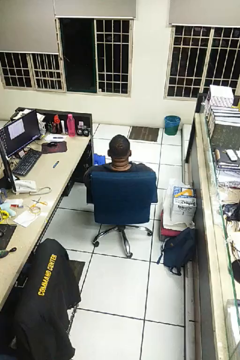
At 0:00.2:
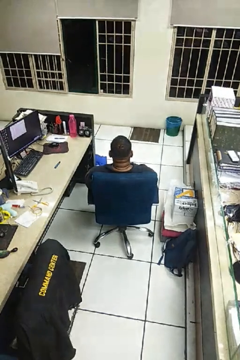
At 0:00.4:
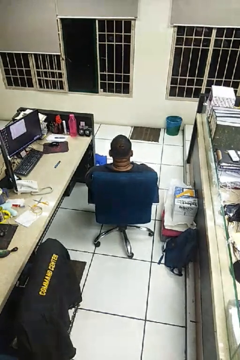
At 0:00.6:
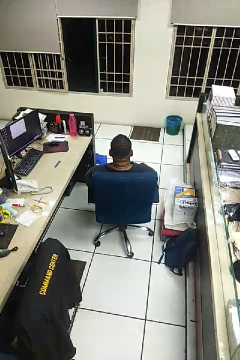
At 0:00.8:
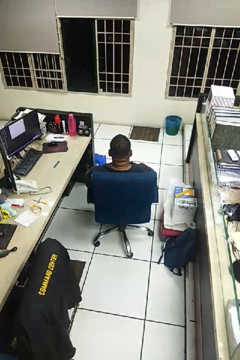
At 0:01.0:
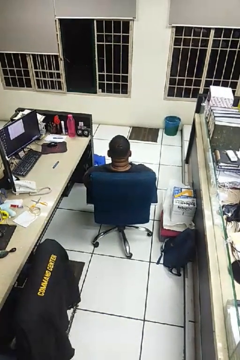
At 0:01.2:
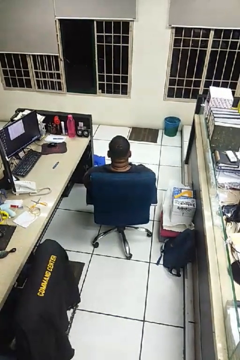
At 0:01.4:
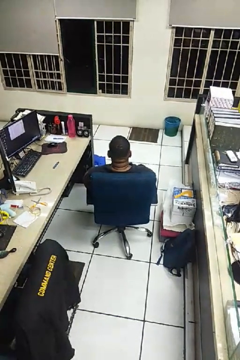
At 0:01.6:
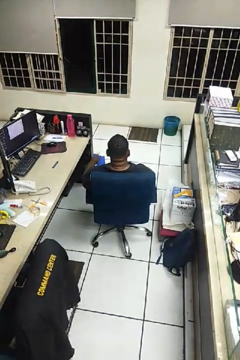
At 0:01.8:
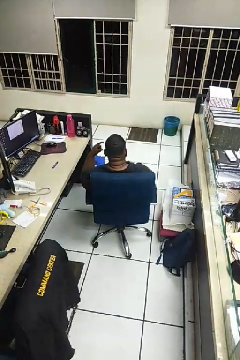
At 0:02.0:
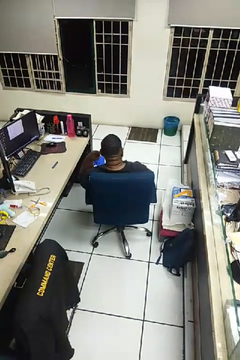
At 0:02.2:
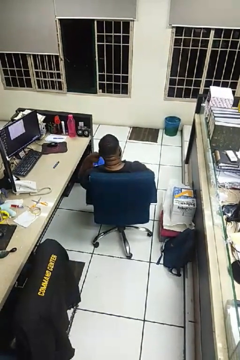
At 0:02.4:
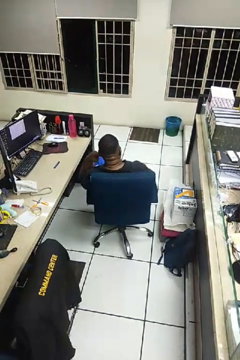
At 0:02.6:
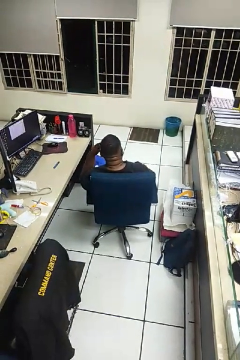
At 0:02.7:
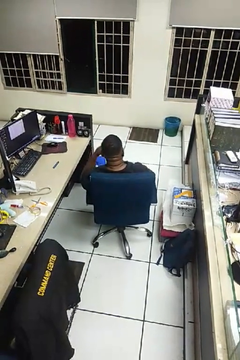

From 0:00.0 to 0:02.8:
person gestures listen closely

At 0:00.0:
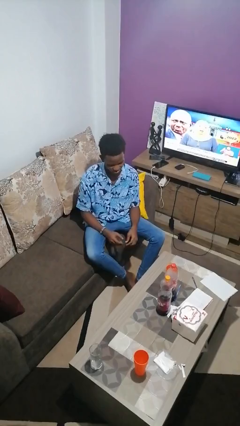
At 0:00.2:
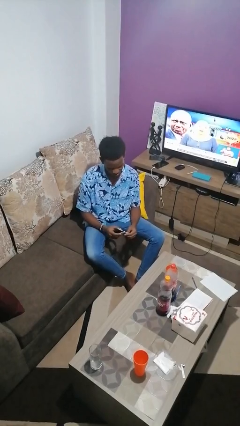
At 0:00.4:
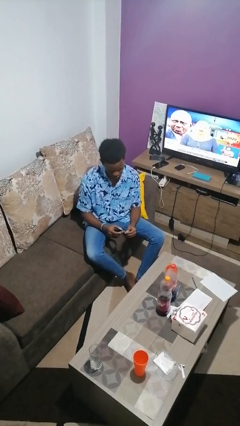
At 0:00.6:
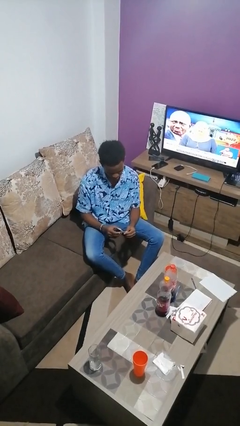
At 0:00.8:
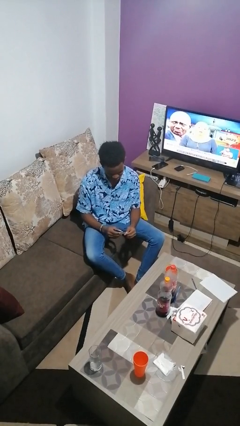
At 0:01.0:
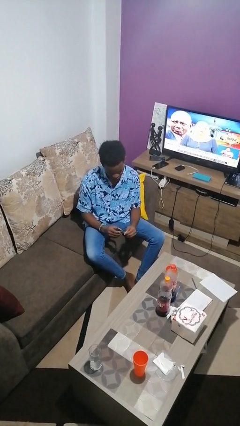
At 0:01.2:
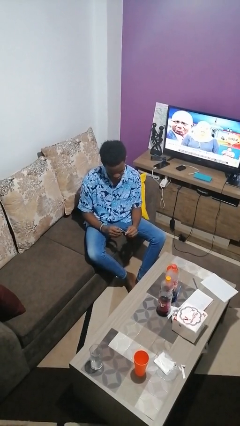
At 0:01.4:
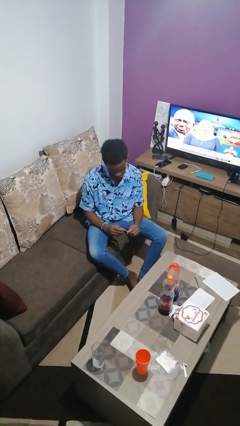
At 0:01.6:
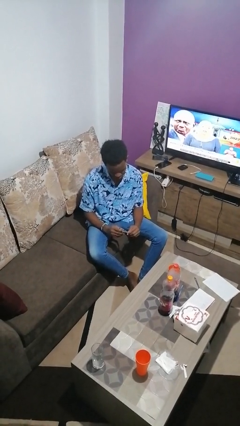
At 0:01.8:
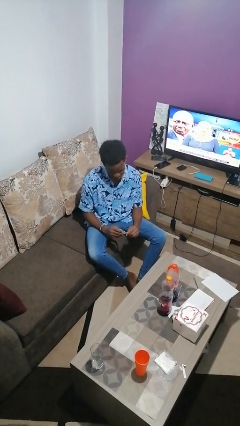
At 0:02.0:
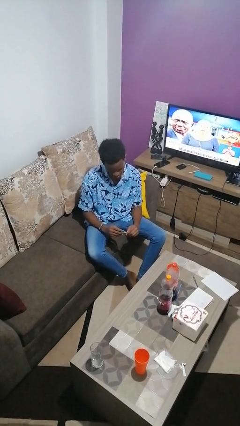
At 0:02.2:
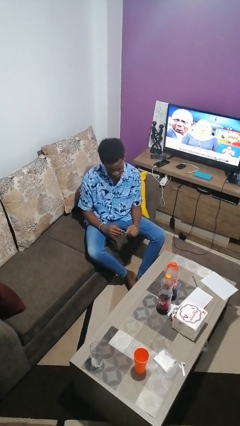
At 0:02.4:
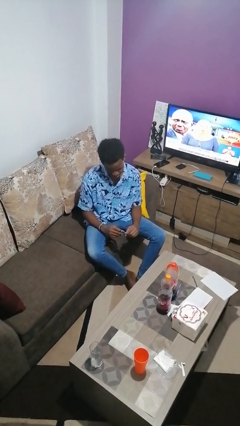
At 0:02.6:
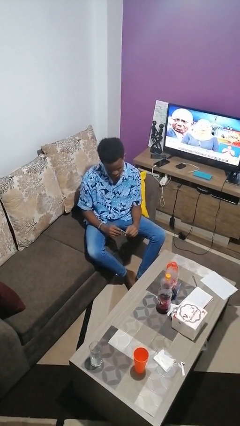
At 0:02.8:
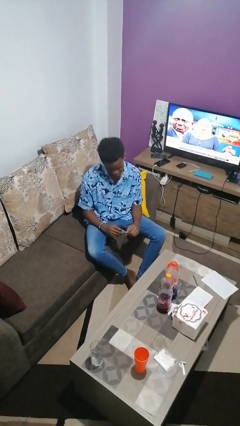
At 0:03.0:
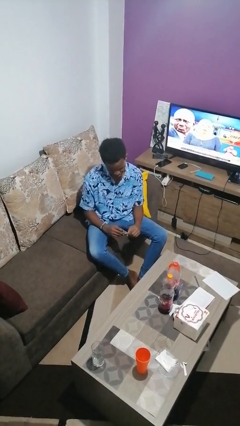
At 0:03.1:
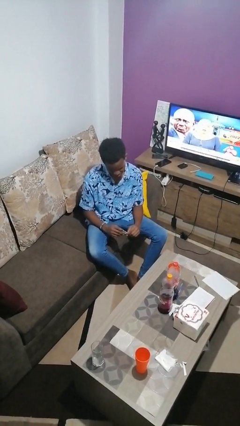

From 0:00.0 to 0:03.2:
person clips fingernails

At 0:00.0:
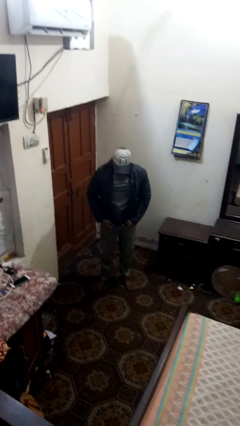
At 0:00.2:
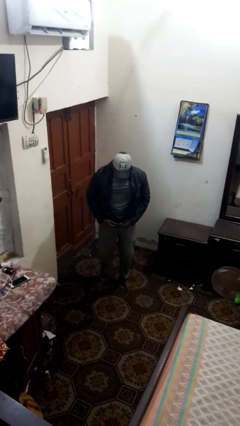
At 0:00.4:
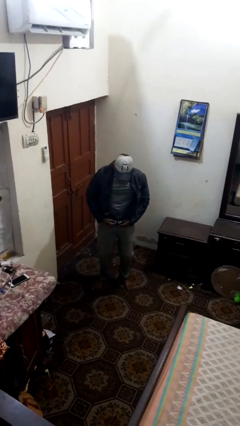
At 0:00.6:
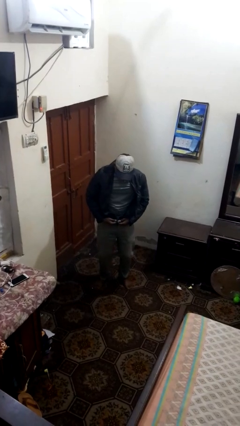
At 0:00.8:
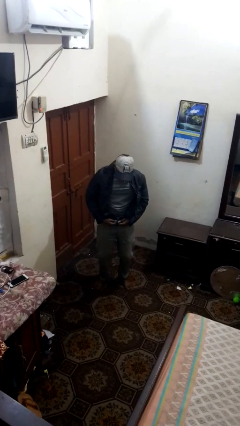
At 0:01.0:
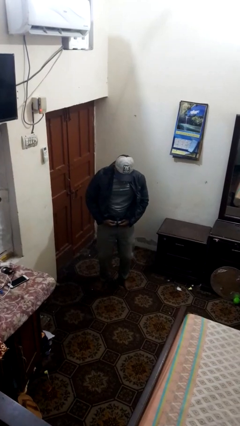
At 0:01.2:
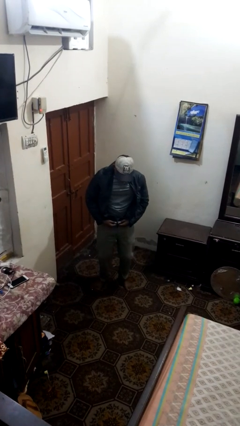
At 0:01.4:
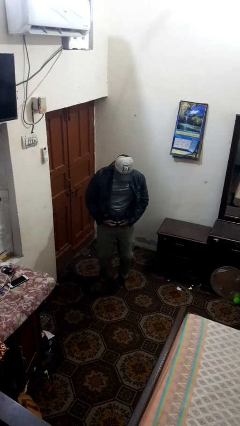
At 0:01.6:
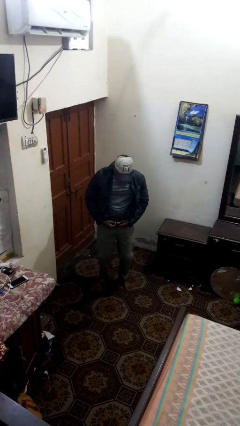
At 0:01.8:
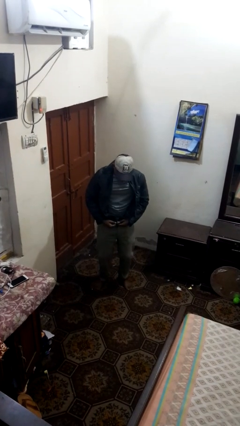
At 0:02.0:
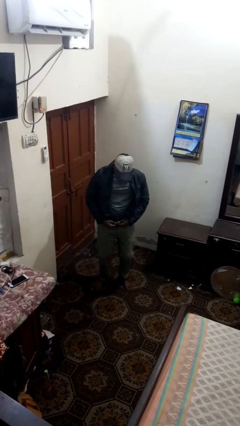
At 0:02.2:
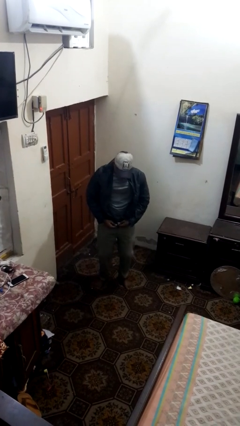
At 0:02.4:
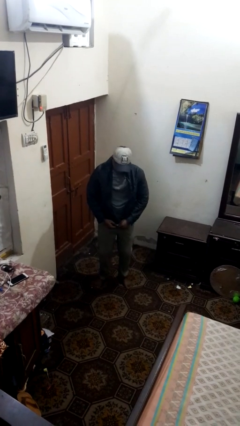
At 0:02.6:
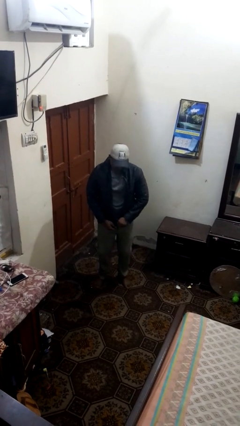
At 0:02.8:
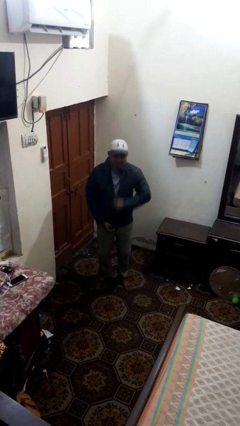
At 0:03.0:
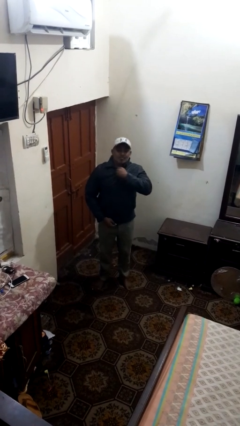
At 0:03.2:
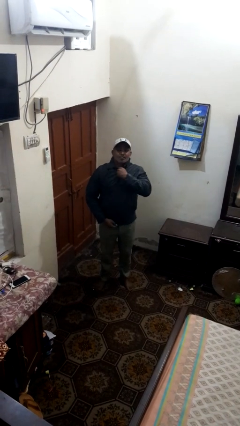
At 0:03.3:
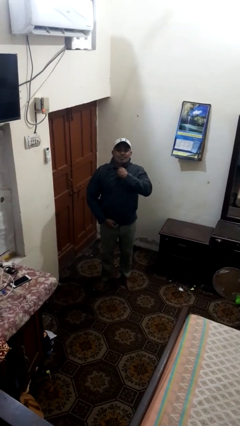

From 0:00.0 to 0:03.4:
person zips up jacket

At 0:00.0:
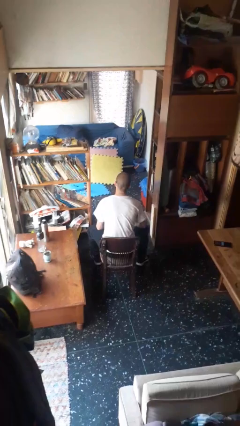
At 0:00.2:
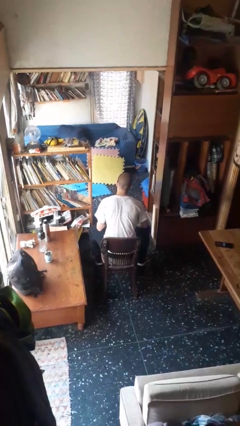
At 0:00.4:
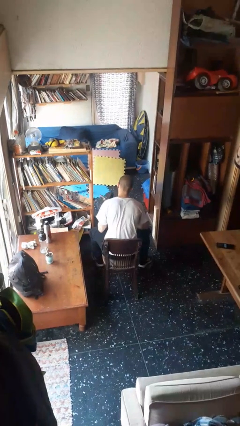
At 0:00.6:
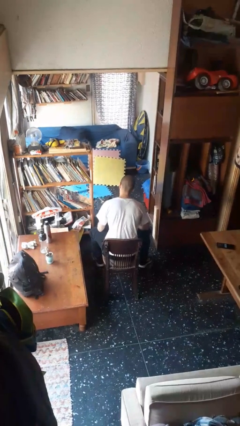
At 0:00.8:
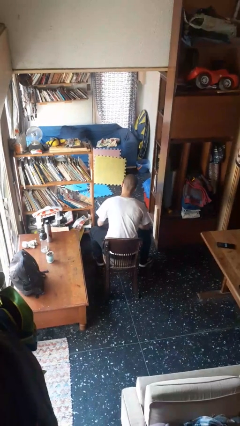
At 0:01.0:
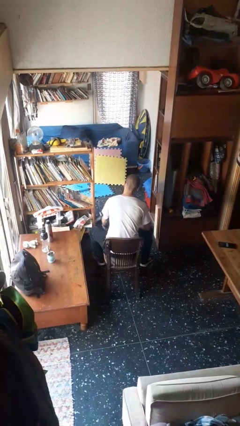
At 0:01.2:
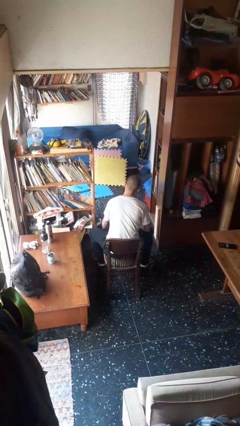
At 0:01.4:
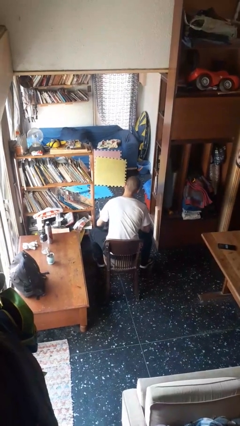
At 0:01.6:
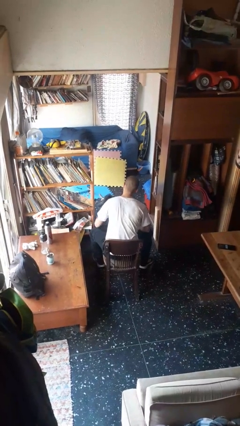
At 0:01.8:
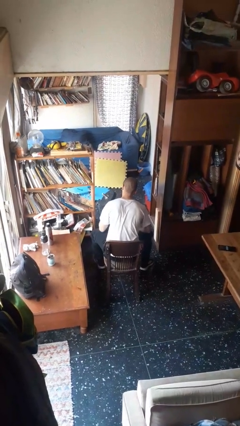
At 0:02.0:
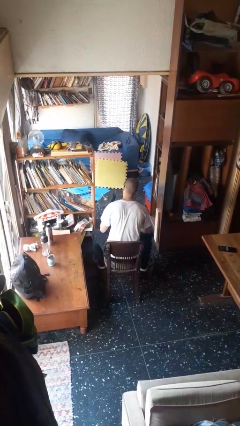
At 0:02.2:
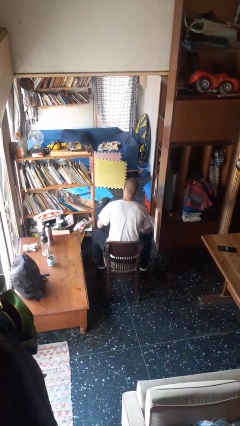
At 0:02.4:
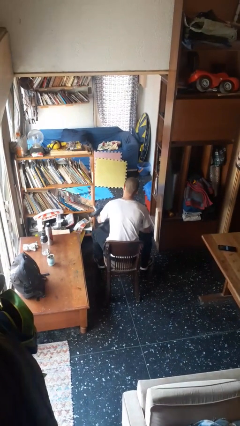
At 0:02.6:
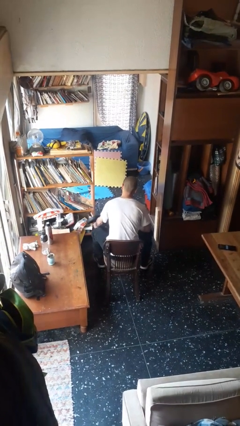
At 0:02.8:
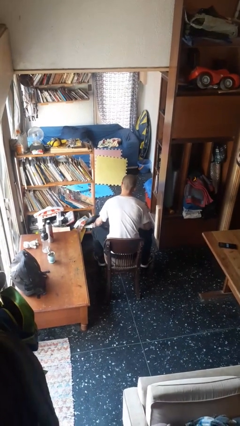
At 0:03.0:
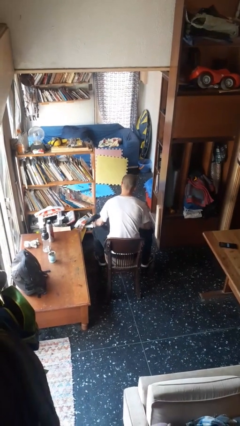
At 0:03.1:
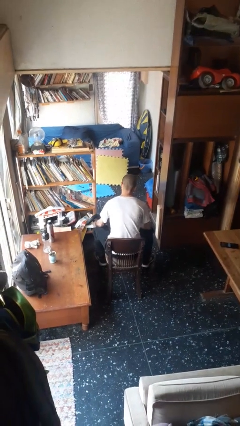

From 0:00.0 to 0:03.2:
person lifts dumbbells

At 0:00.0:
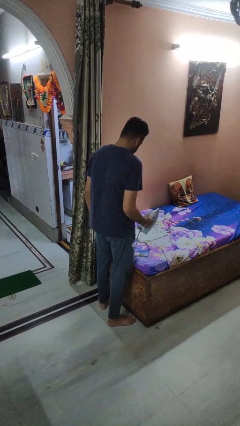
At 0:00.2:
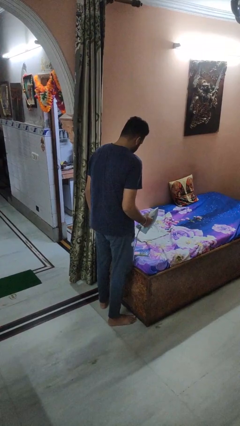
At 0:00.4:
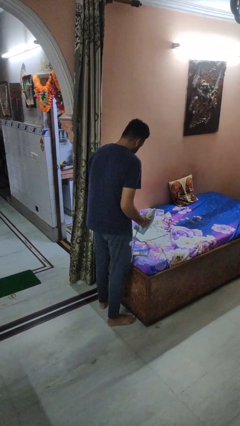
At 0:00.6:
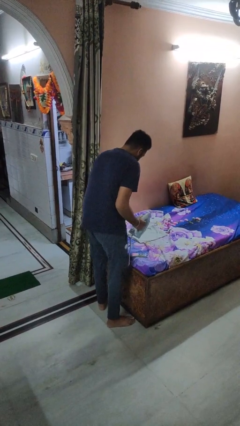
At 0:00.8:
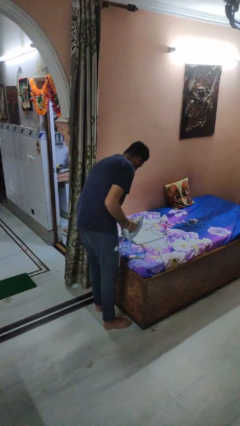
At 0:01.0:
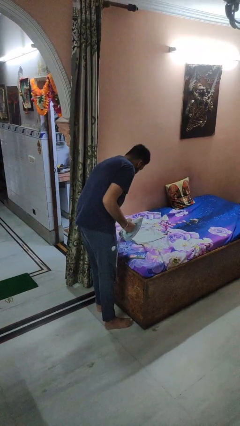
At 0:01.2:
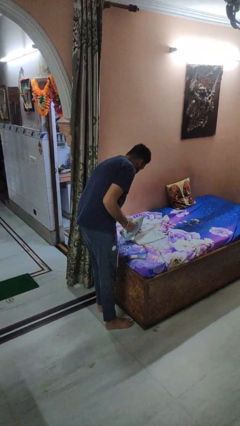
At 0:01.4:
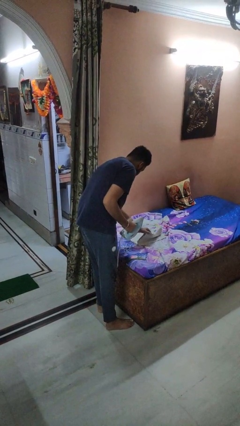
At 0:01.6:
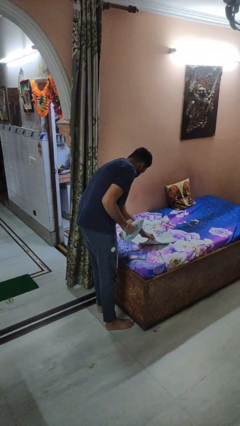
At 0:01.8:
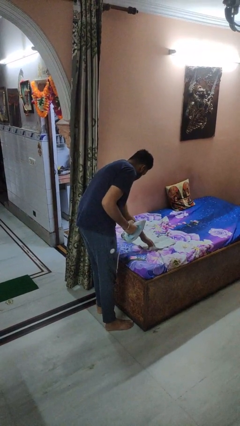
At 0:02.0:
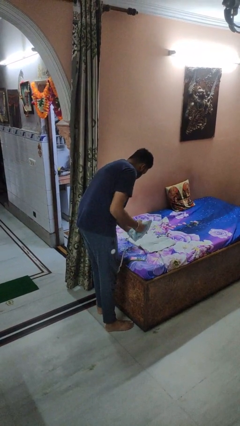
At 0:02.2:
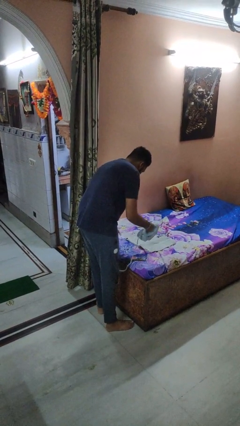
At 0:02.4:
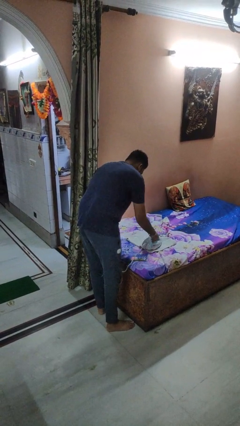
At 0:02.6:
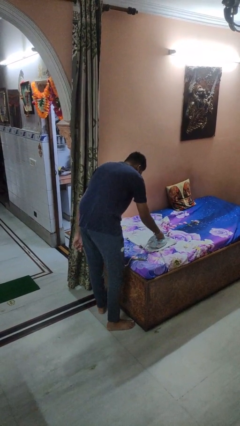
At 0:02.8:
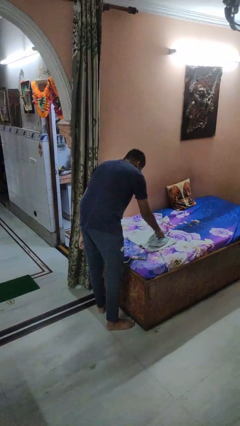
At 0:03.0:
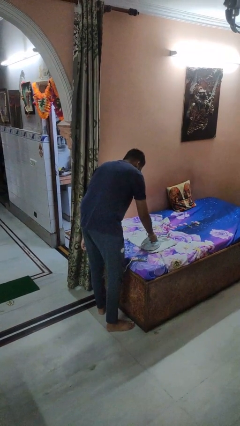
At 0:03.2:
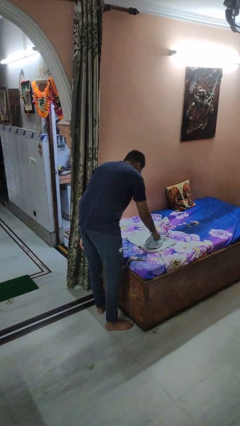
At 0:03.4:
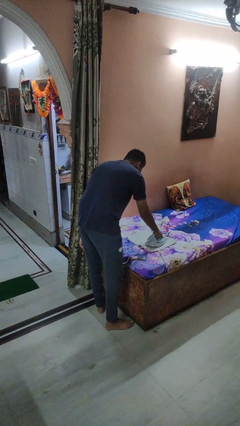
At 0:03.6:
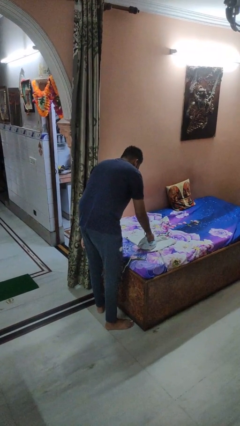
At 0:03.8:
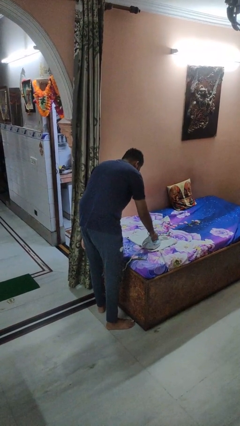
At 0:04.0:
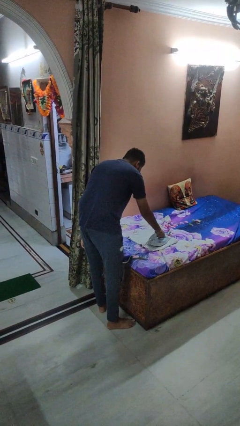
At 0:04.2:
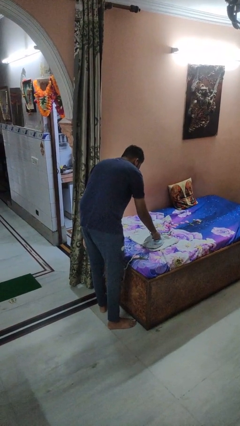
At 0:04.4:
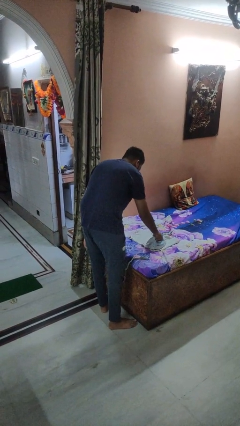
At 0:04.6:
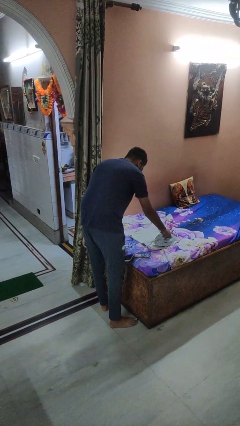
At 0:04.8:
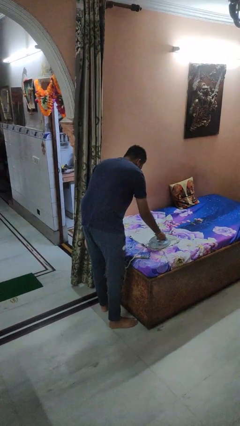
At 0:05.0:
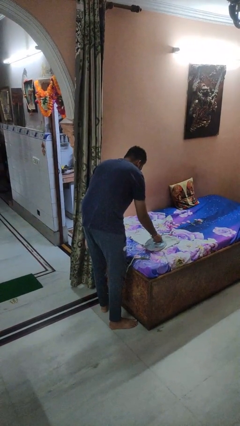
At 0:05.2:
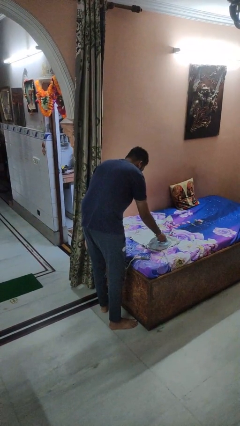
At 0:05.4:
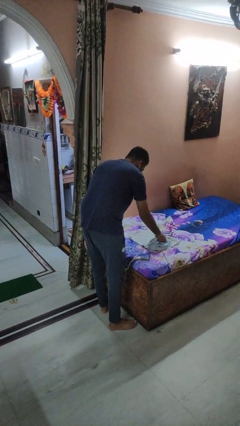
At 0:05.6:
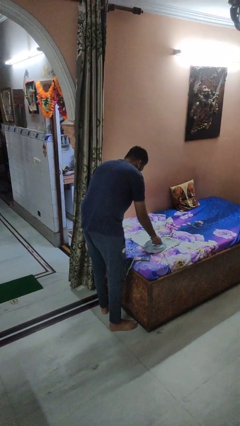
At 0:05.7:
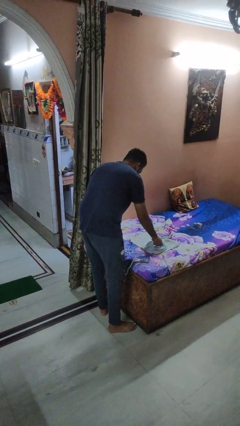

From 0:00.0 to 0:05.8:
person irons clothes
